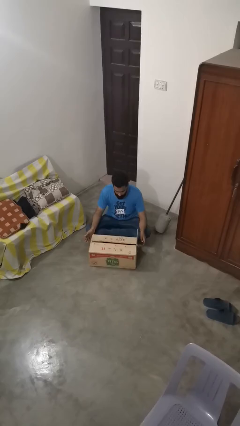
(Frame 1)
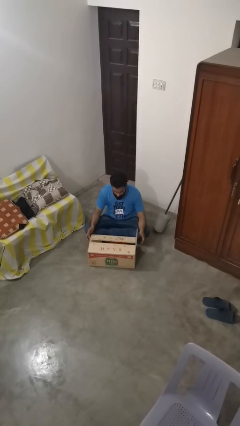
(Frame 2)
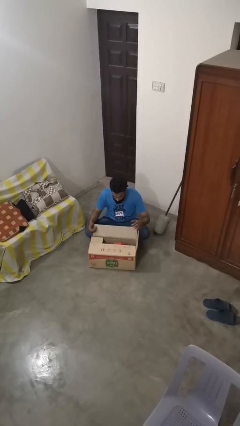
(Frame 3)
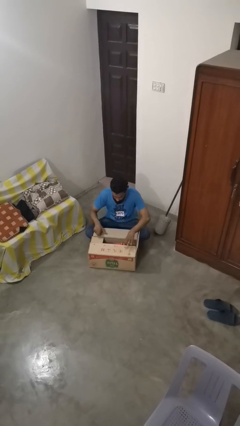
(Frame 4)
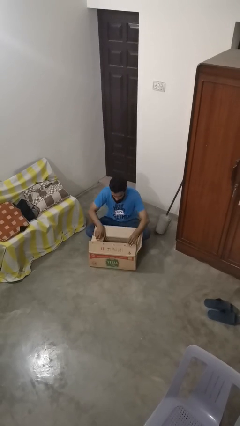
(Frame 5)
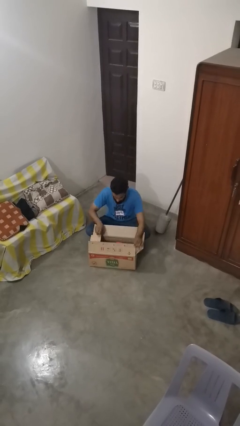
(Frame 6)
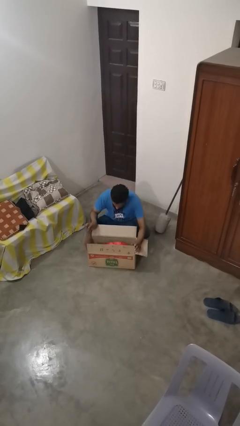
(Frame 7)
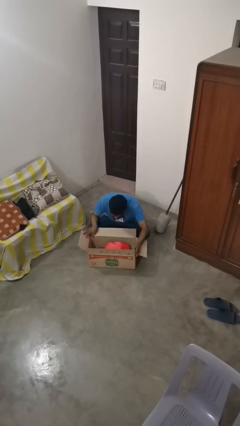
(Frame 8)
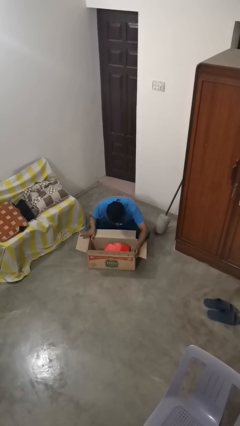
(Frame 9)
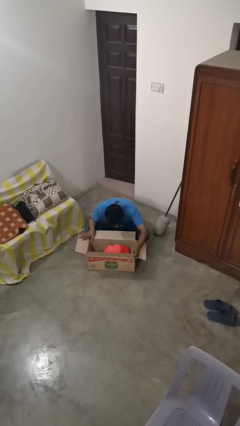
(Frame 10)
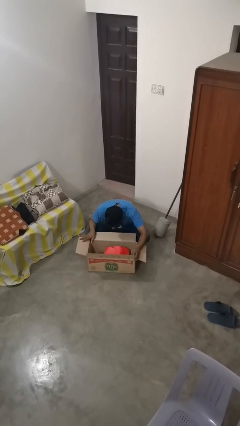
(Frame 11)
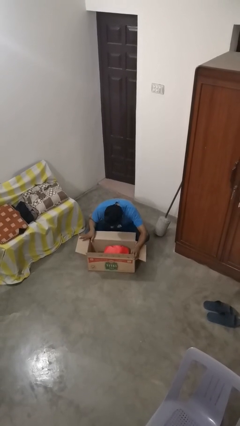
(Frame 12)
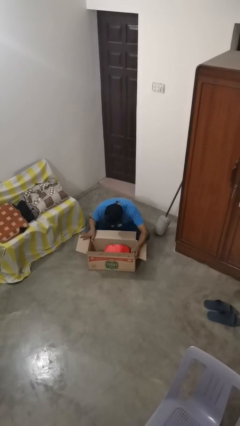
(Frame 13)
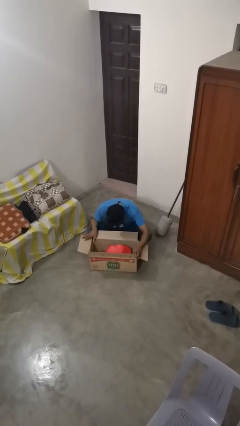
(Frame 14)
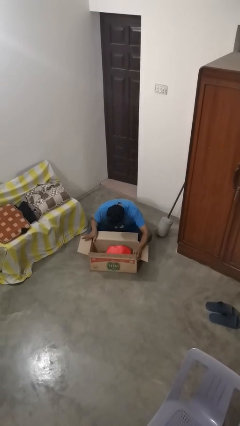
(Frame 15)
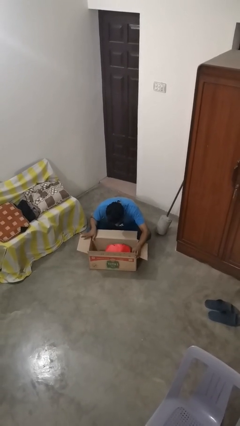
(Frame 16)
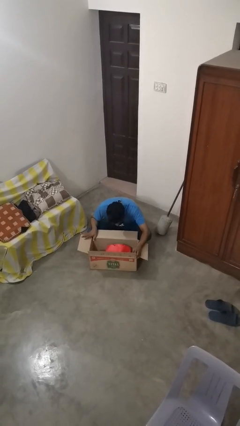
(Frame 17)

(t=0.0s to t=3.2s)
person searches in box

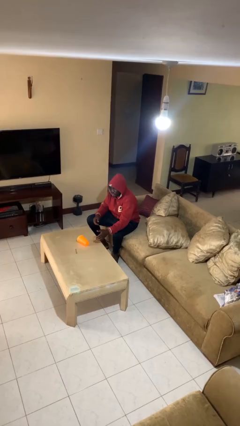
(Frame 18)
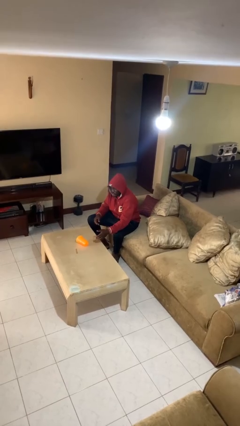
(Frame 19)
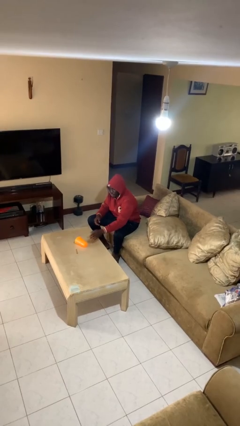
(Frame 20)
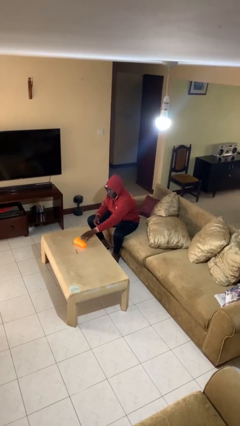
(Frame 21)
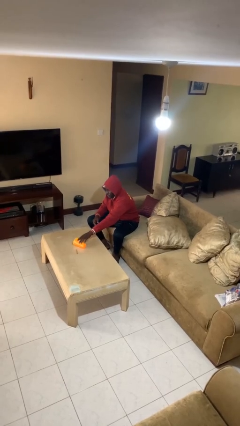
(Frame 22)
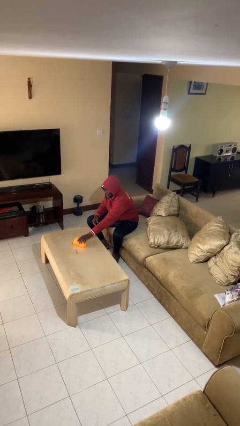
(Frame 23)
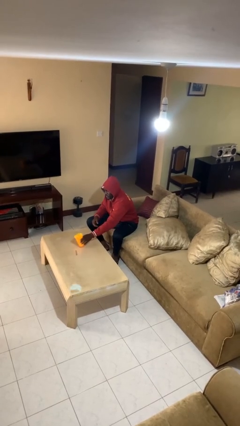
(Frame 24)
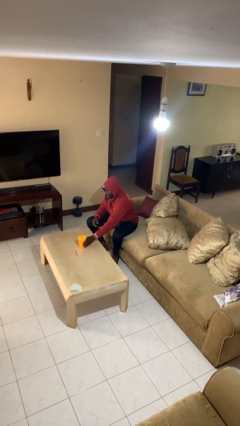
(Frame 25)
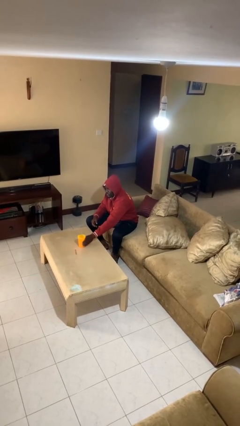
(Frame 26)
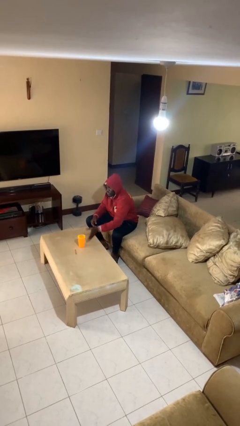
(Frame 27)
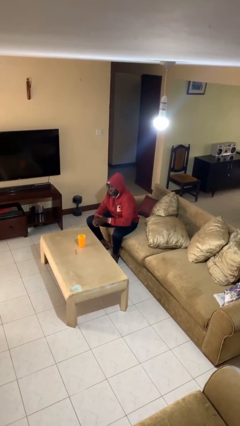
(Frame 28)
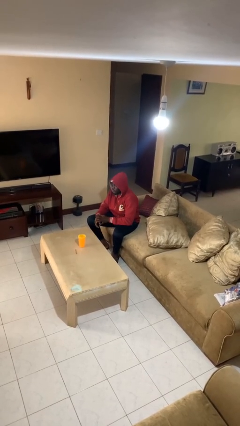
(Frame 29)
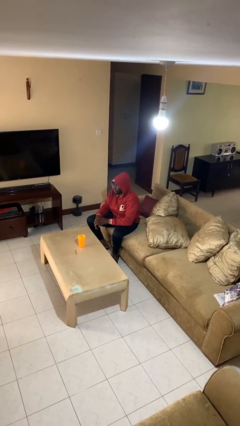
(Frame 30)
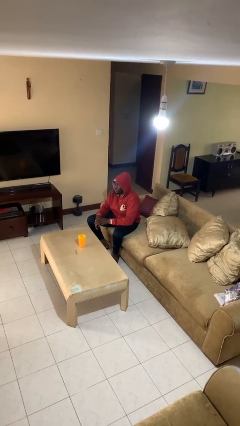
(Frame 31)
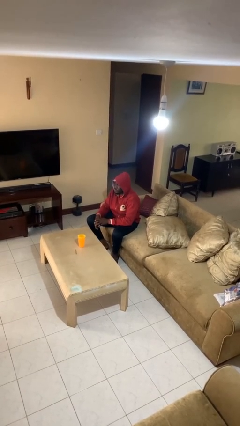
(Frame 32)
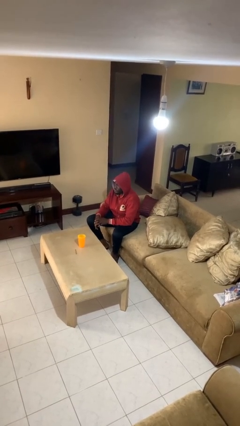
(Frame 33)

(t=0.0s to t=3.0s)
person sets upright glass

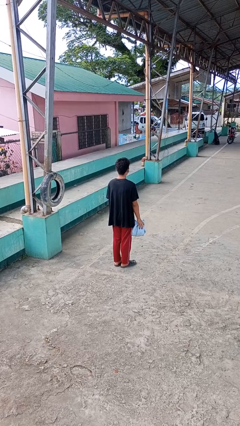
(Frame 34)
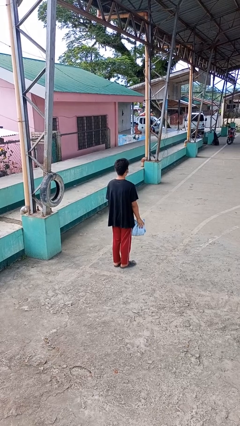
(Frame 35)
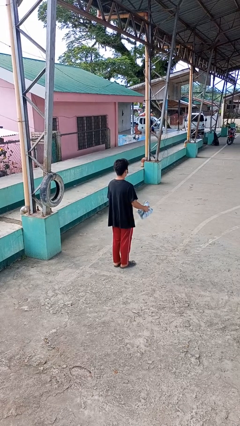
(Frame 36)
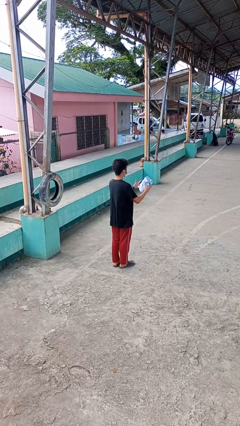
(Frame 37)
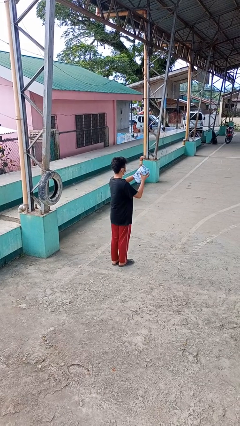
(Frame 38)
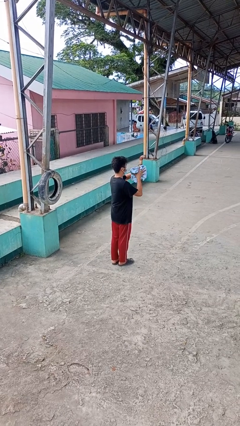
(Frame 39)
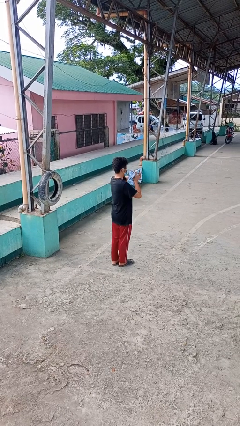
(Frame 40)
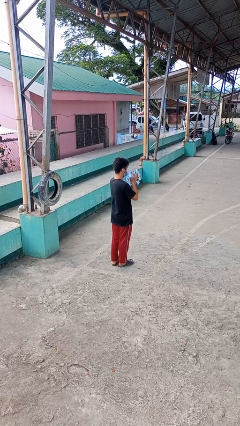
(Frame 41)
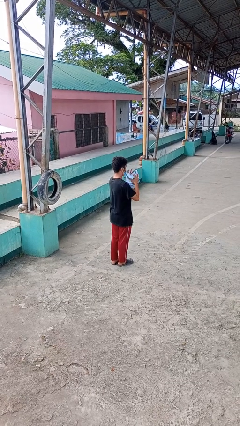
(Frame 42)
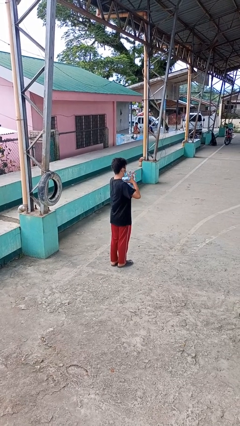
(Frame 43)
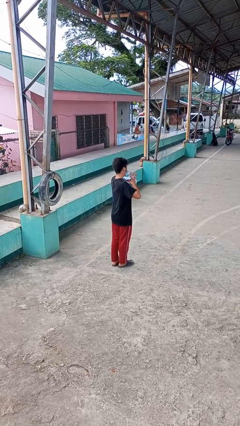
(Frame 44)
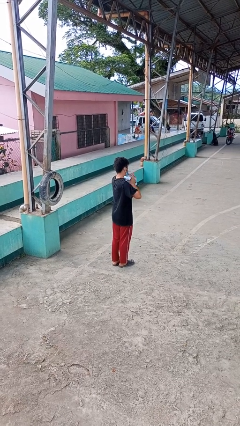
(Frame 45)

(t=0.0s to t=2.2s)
person squeezes object

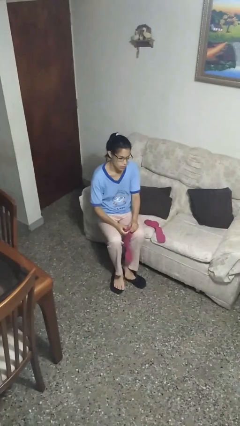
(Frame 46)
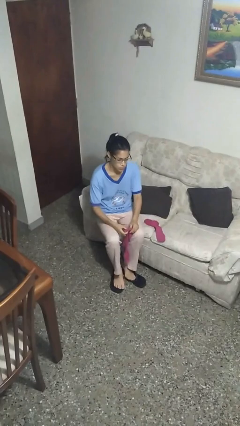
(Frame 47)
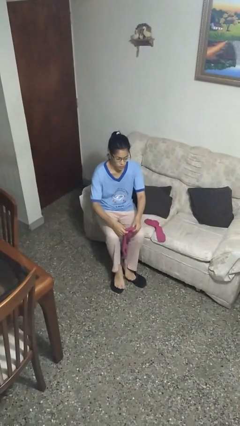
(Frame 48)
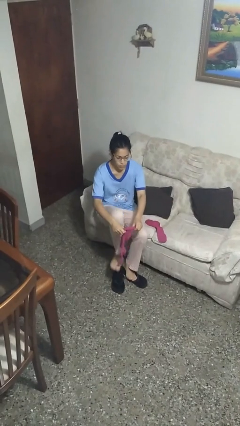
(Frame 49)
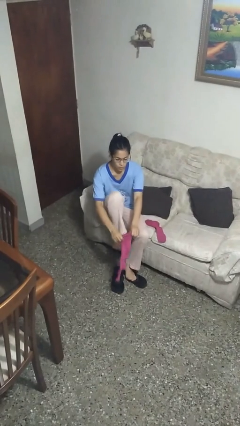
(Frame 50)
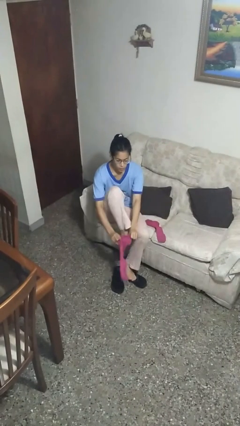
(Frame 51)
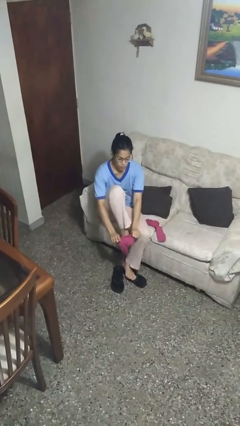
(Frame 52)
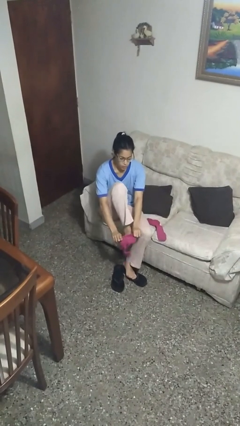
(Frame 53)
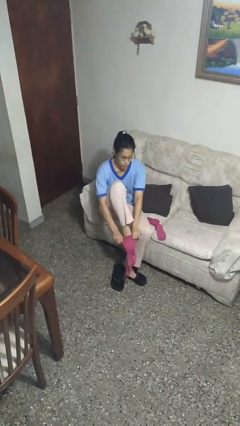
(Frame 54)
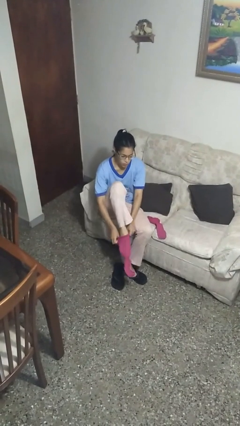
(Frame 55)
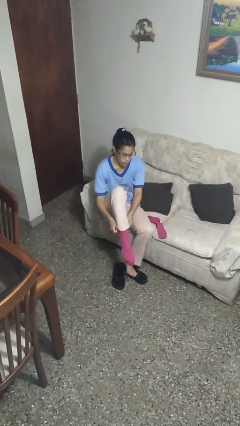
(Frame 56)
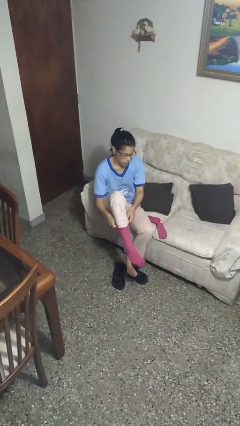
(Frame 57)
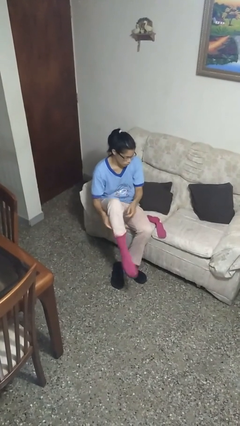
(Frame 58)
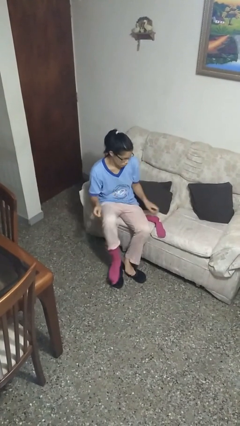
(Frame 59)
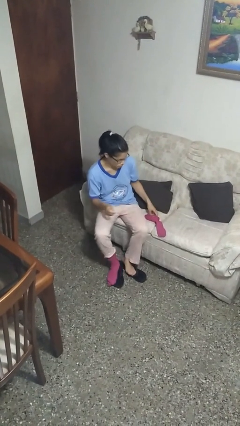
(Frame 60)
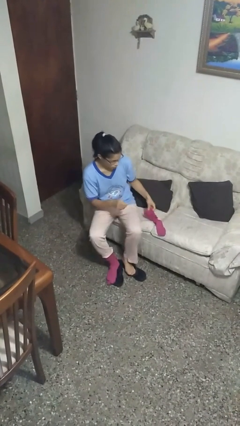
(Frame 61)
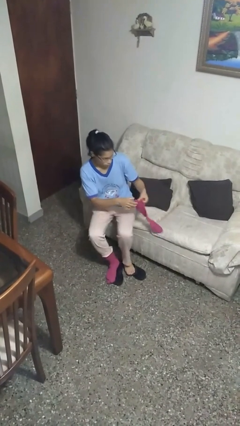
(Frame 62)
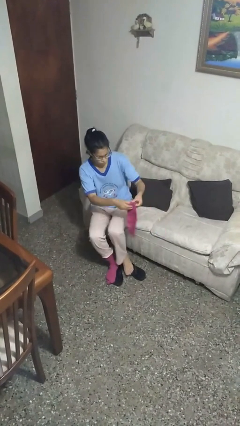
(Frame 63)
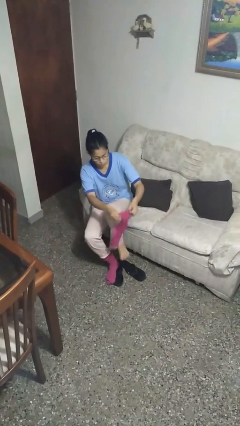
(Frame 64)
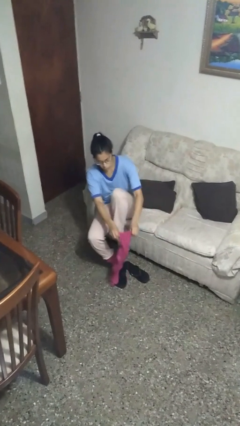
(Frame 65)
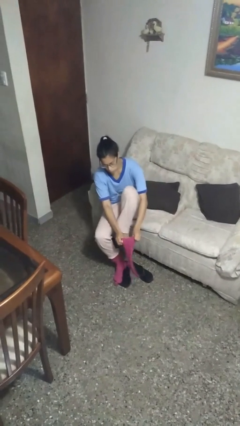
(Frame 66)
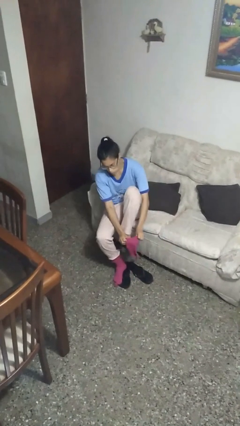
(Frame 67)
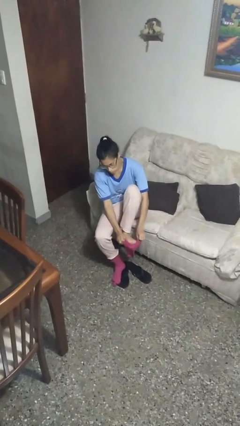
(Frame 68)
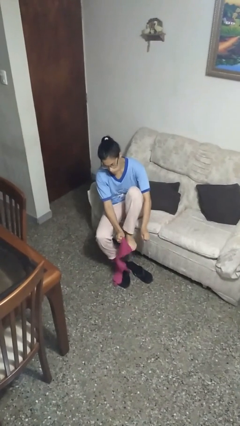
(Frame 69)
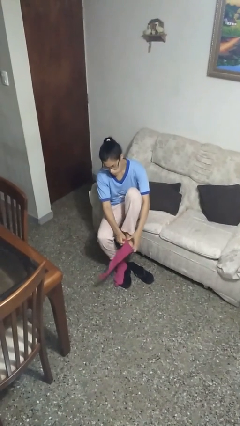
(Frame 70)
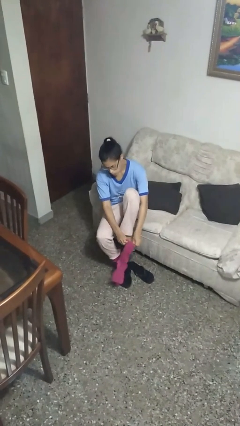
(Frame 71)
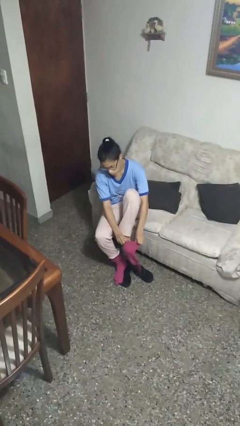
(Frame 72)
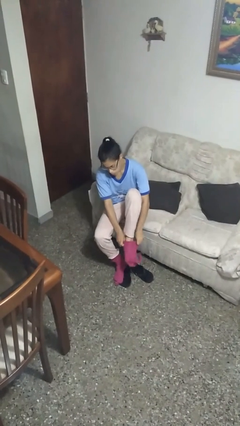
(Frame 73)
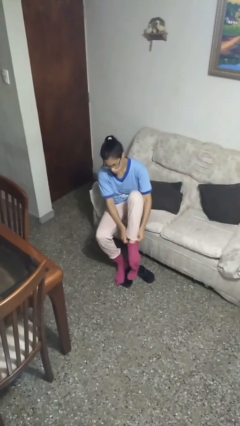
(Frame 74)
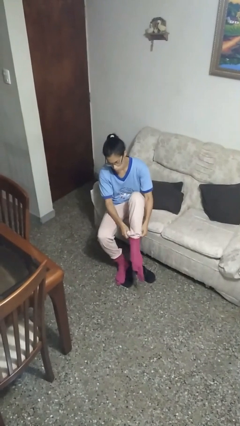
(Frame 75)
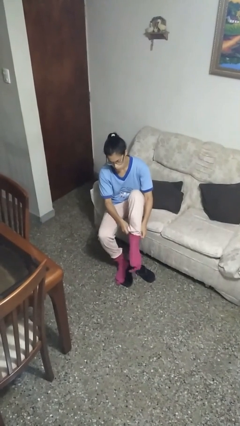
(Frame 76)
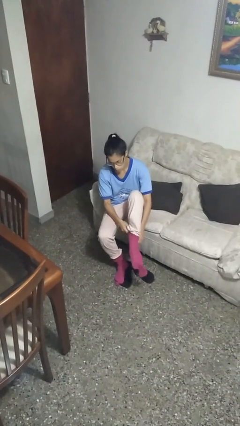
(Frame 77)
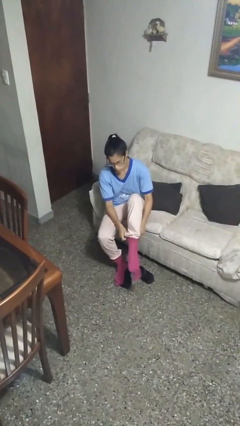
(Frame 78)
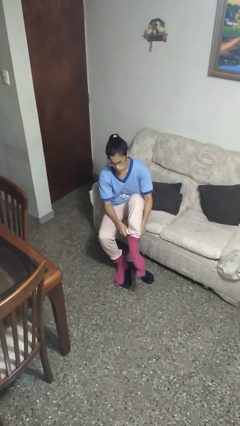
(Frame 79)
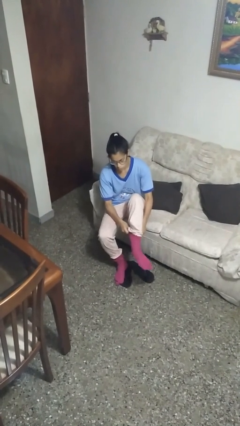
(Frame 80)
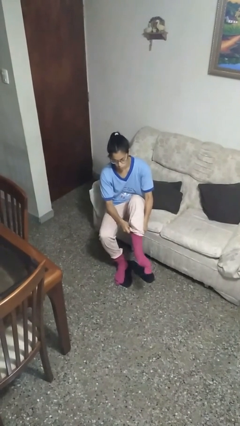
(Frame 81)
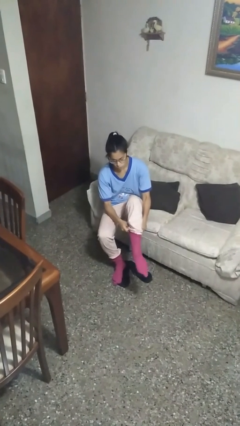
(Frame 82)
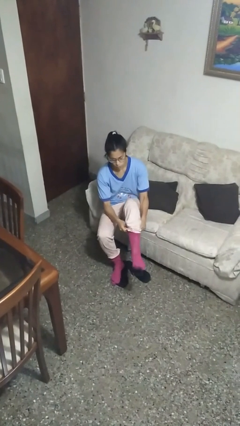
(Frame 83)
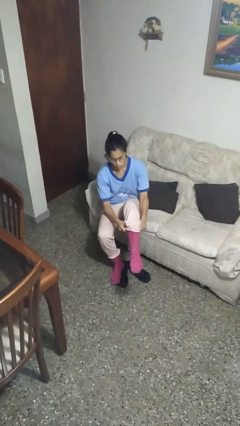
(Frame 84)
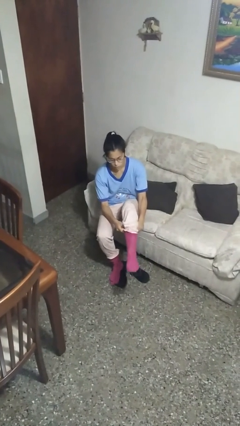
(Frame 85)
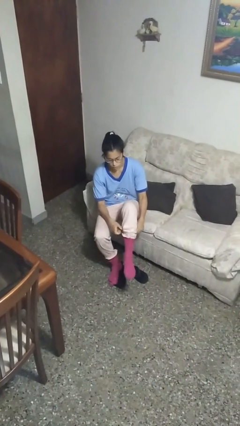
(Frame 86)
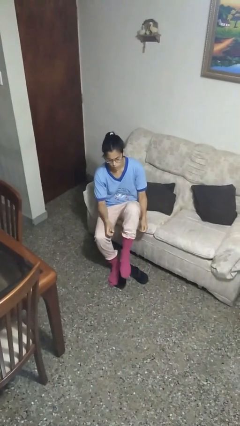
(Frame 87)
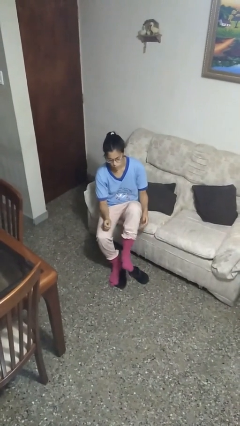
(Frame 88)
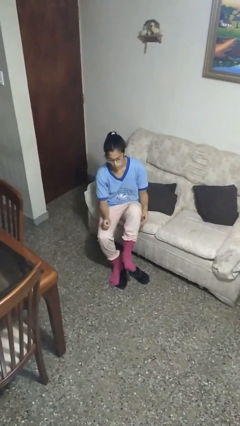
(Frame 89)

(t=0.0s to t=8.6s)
person puts on necklace

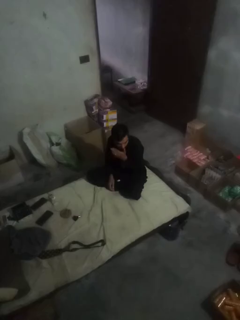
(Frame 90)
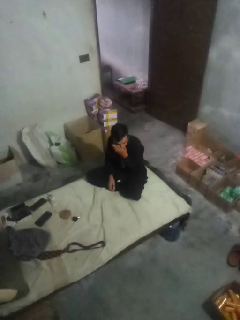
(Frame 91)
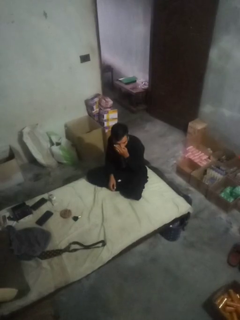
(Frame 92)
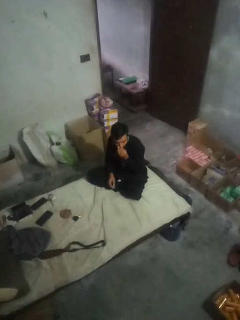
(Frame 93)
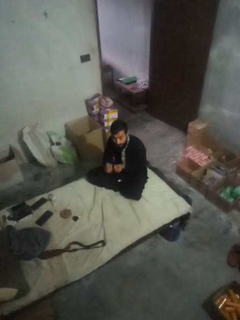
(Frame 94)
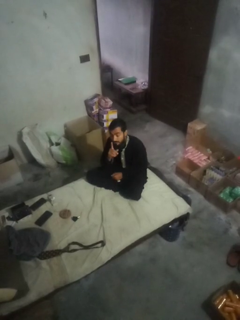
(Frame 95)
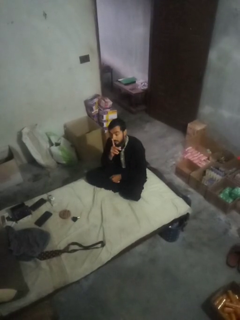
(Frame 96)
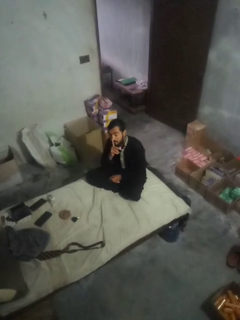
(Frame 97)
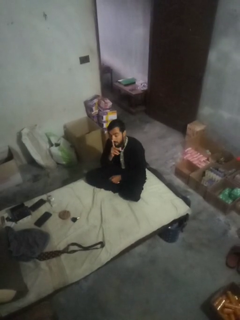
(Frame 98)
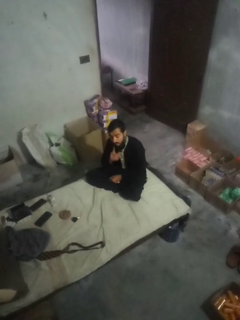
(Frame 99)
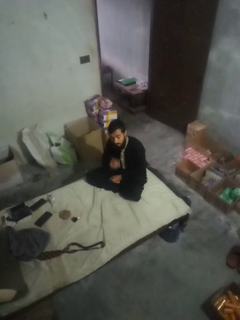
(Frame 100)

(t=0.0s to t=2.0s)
person gestures be quiet
